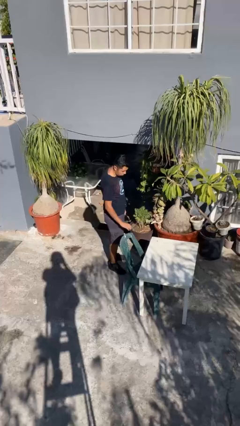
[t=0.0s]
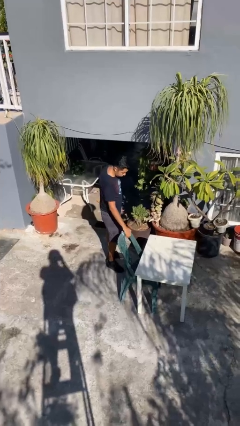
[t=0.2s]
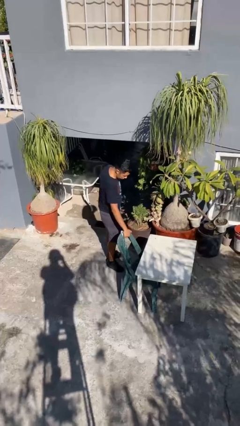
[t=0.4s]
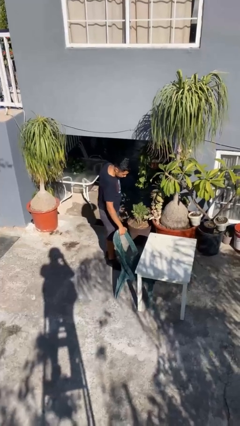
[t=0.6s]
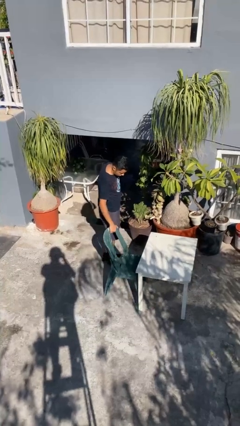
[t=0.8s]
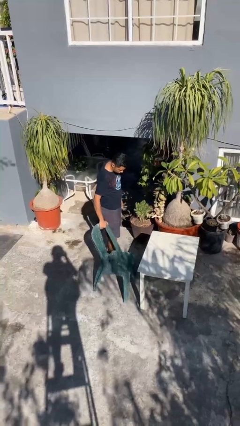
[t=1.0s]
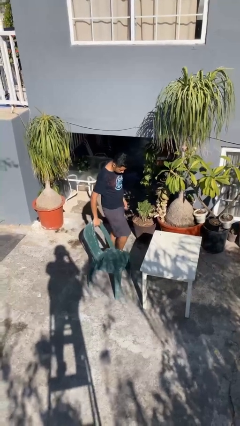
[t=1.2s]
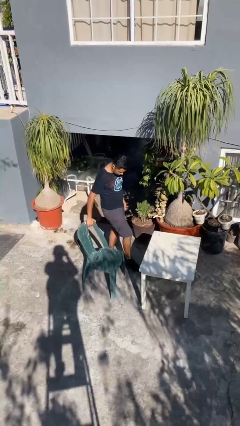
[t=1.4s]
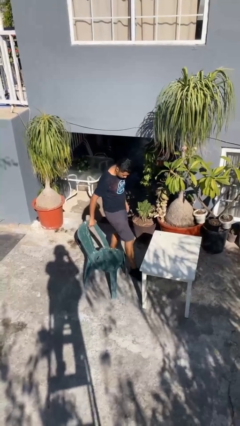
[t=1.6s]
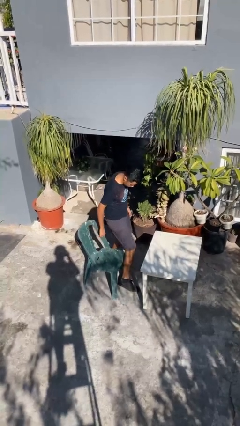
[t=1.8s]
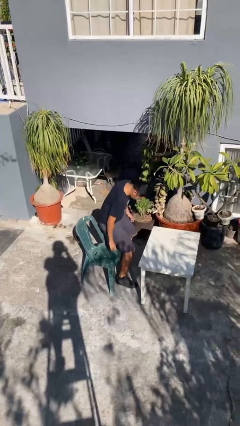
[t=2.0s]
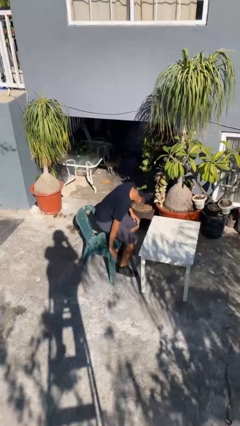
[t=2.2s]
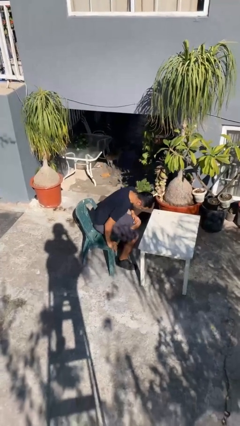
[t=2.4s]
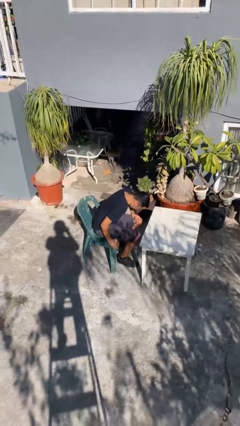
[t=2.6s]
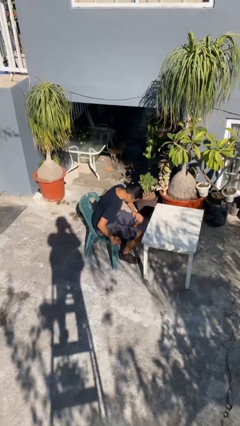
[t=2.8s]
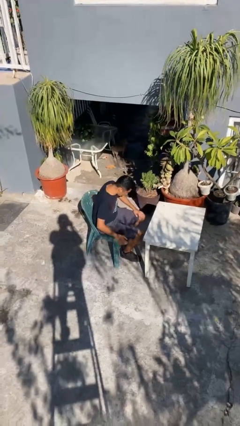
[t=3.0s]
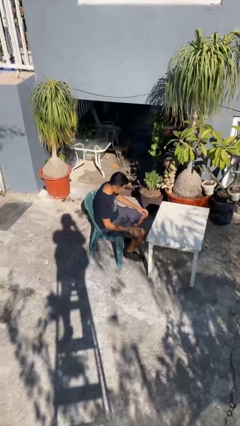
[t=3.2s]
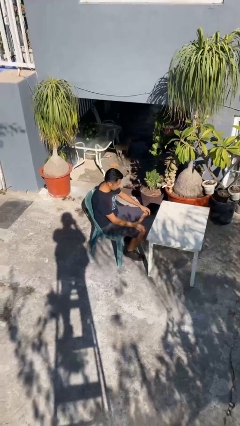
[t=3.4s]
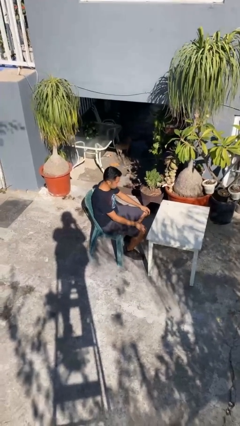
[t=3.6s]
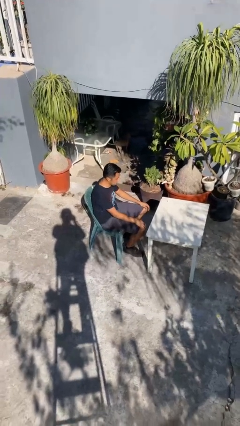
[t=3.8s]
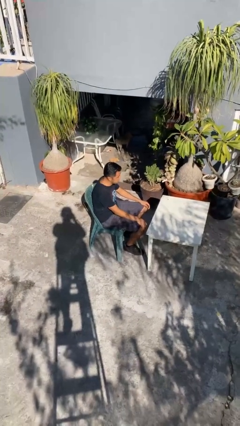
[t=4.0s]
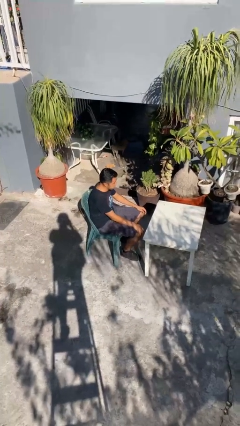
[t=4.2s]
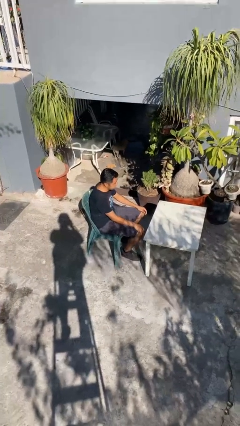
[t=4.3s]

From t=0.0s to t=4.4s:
person sits down

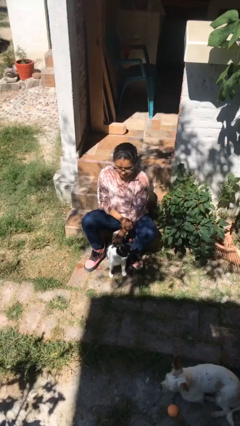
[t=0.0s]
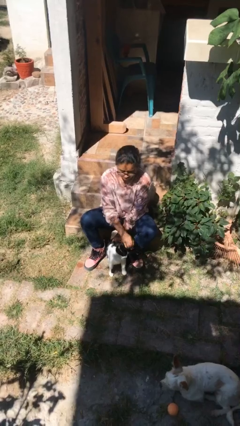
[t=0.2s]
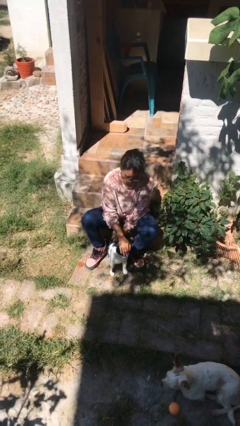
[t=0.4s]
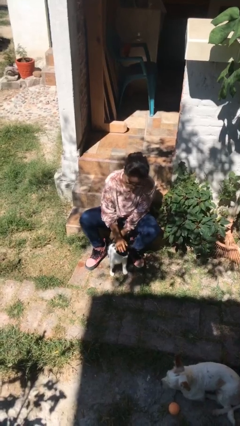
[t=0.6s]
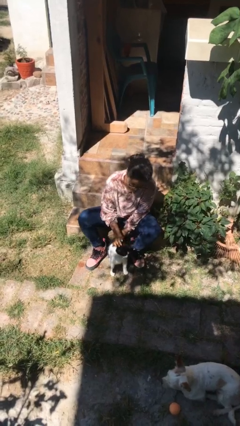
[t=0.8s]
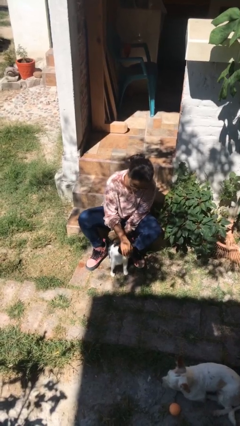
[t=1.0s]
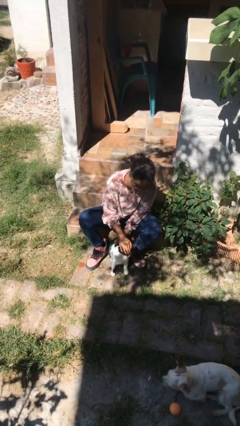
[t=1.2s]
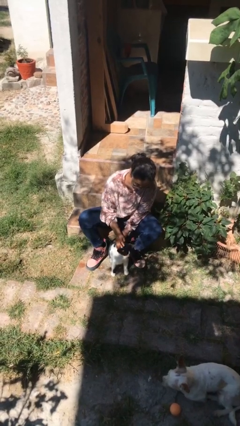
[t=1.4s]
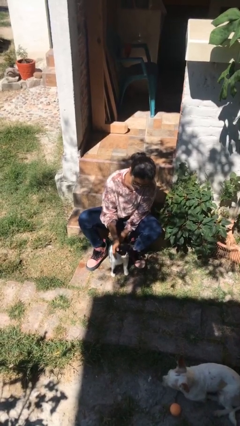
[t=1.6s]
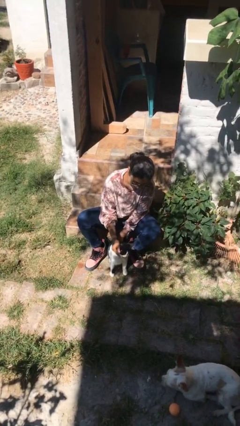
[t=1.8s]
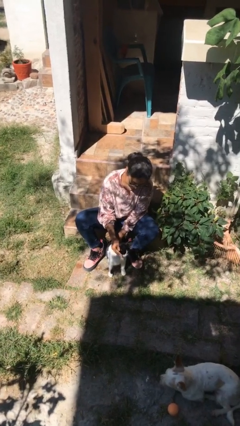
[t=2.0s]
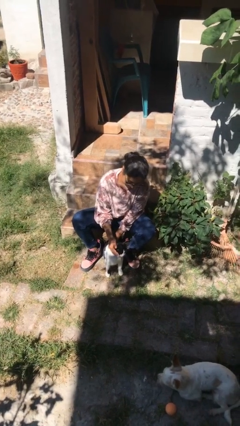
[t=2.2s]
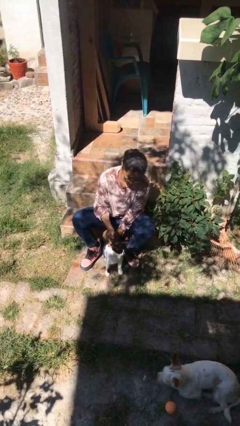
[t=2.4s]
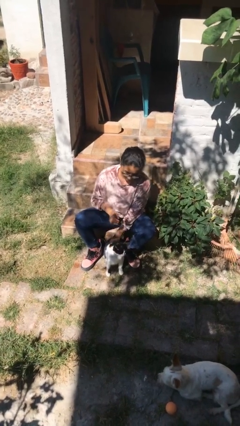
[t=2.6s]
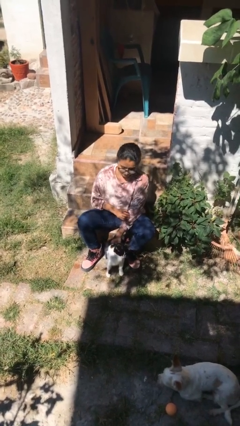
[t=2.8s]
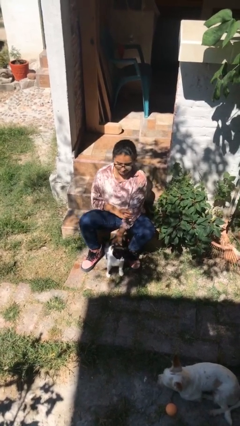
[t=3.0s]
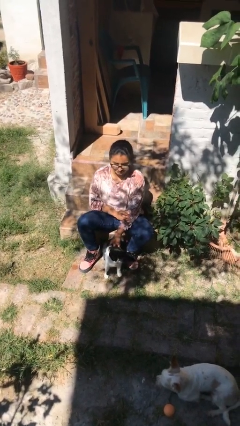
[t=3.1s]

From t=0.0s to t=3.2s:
person pets cat

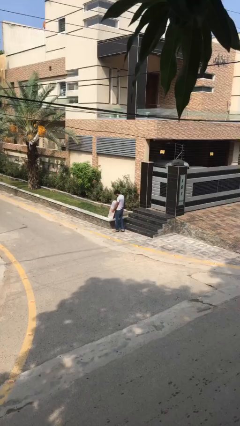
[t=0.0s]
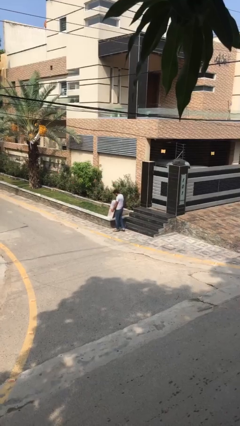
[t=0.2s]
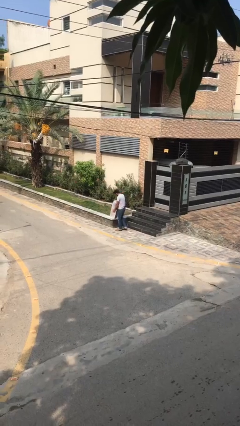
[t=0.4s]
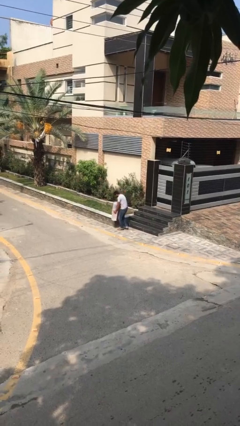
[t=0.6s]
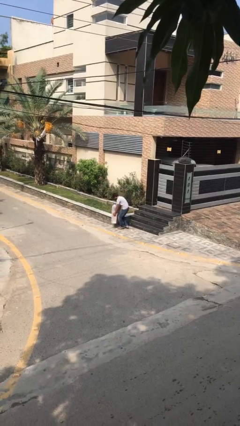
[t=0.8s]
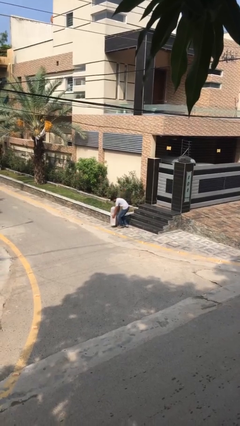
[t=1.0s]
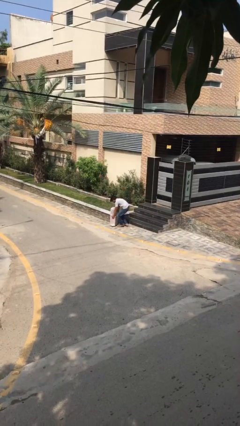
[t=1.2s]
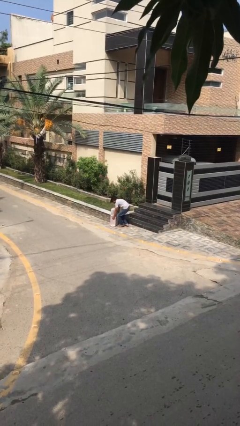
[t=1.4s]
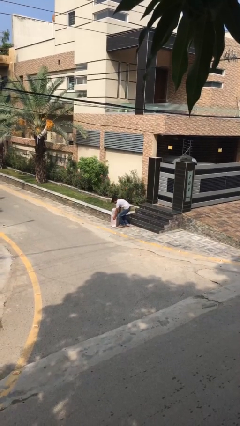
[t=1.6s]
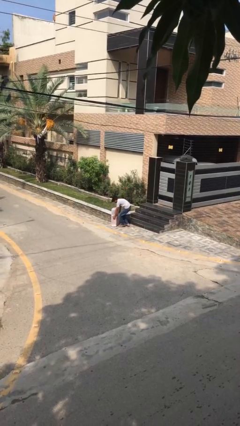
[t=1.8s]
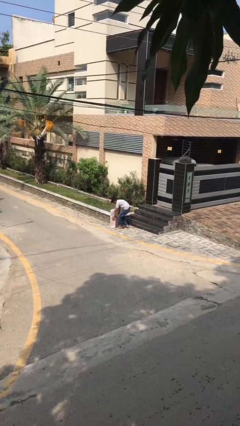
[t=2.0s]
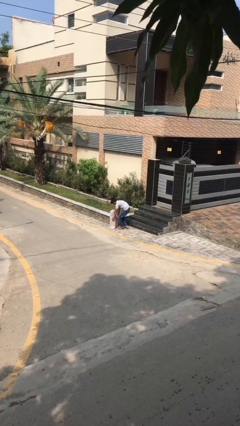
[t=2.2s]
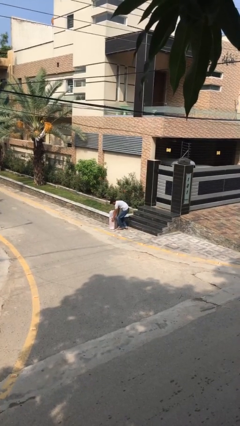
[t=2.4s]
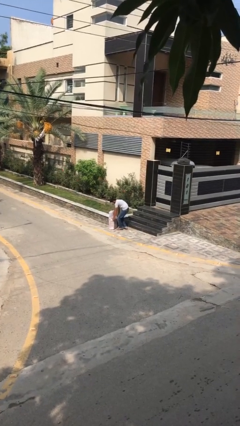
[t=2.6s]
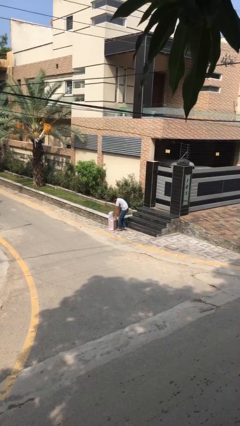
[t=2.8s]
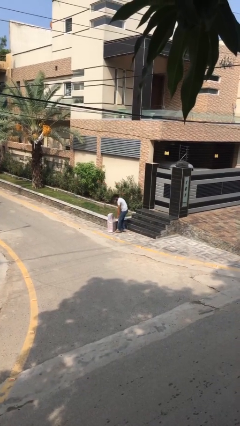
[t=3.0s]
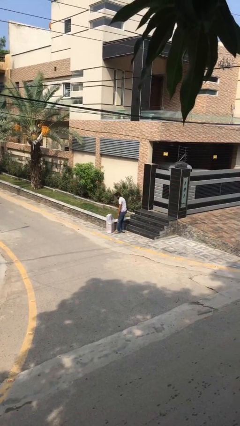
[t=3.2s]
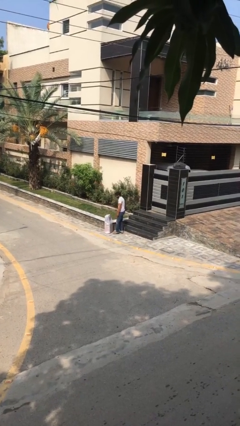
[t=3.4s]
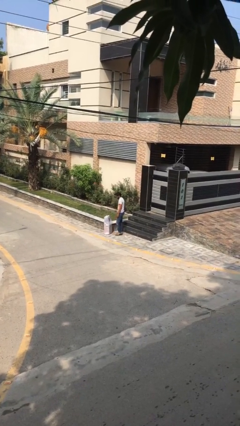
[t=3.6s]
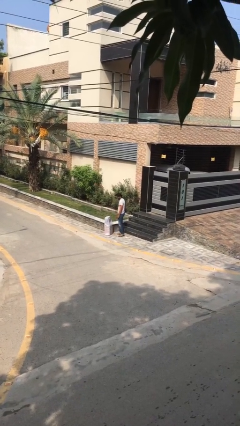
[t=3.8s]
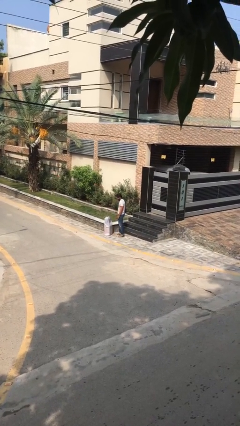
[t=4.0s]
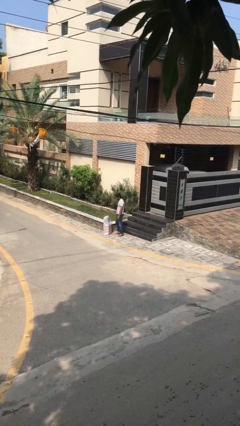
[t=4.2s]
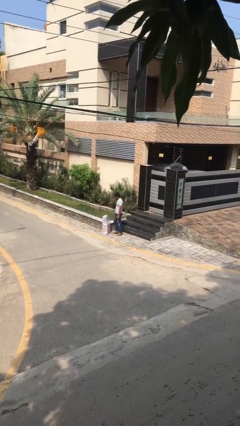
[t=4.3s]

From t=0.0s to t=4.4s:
person puts down object on floor

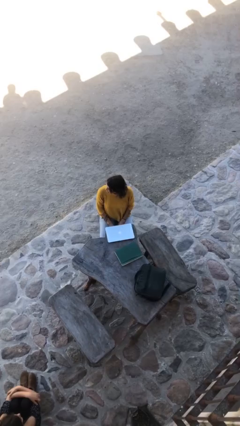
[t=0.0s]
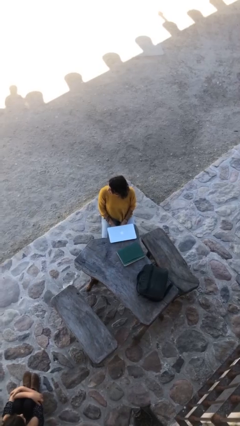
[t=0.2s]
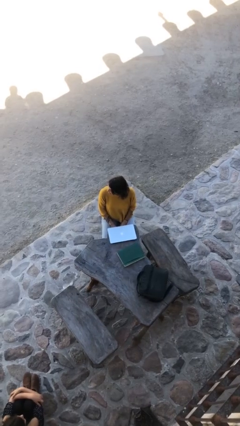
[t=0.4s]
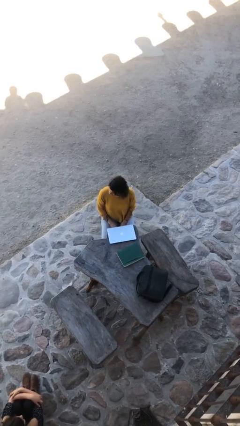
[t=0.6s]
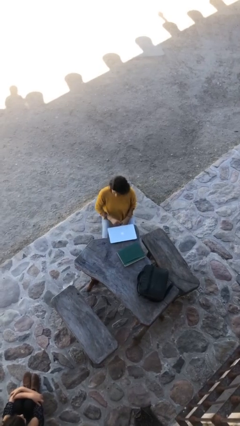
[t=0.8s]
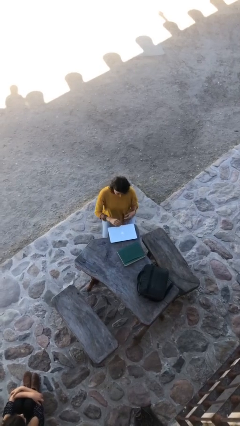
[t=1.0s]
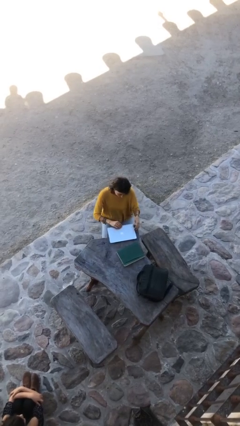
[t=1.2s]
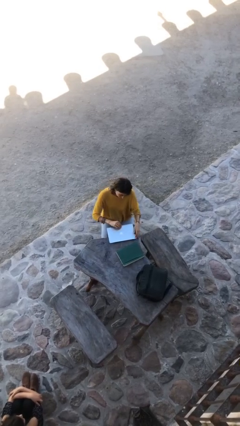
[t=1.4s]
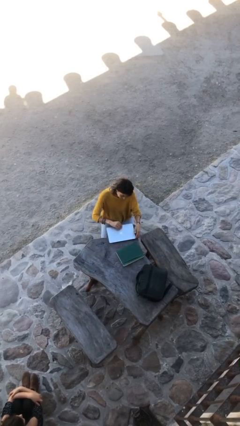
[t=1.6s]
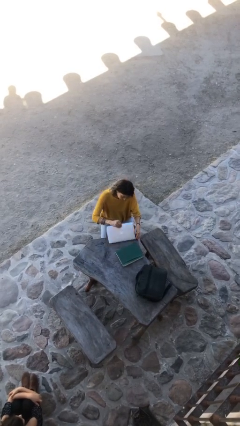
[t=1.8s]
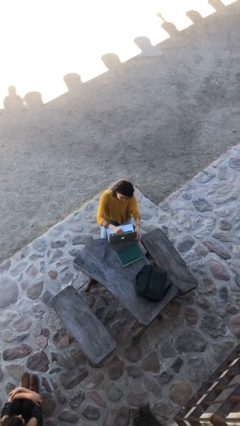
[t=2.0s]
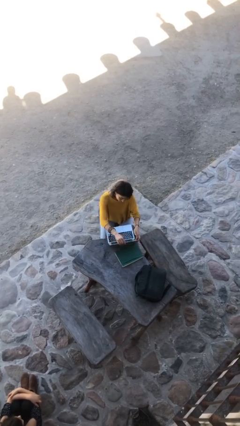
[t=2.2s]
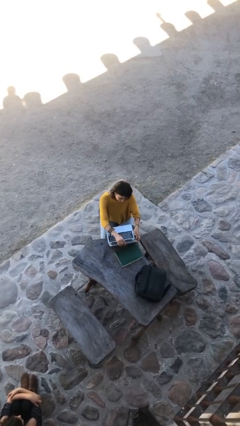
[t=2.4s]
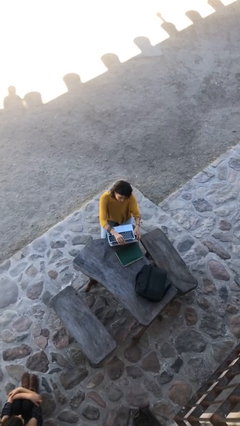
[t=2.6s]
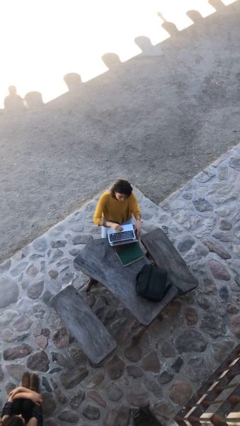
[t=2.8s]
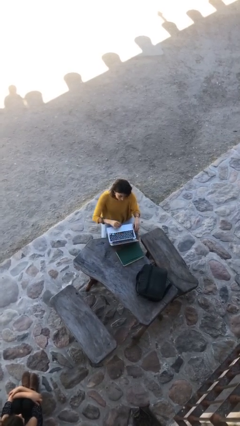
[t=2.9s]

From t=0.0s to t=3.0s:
person interacts with laptop

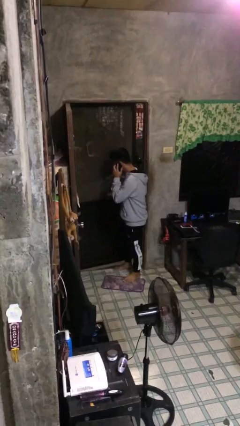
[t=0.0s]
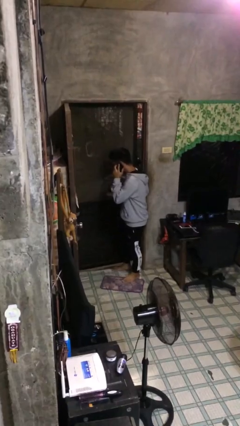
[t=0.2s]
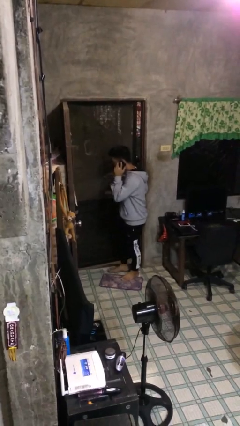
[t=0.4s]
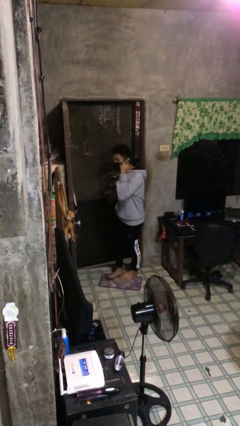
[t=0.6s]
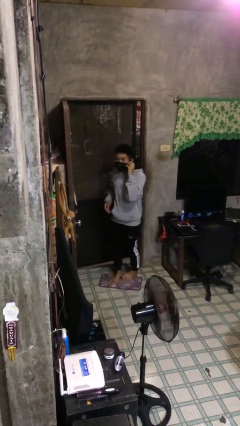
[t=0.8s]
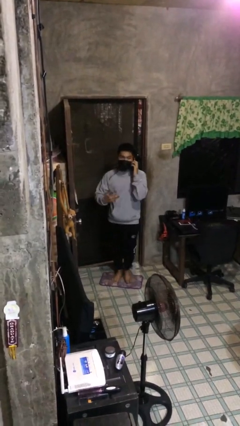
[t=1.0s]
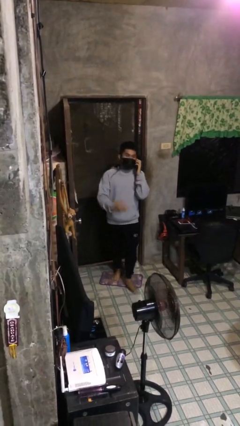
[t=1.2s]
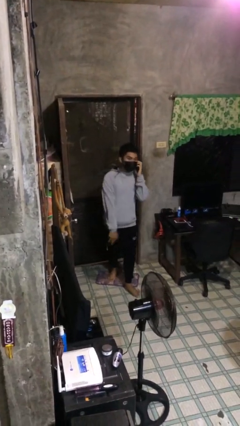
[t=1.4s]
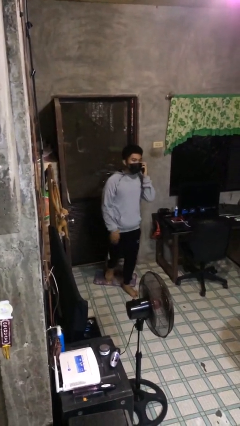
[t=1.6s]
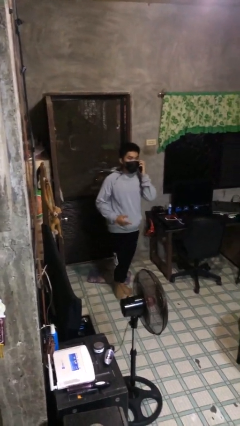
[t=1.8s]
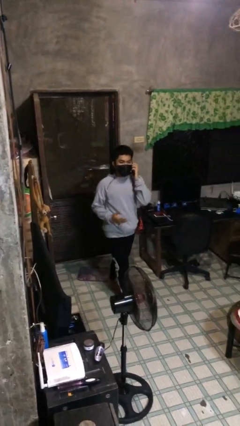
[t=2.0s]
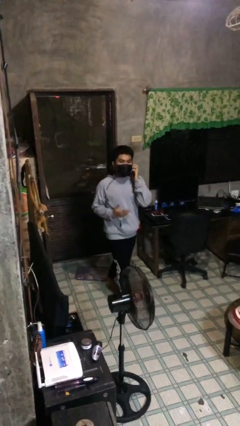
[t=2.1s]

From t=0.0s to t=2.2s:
person closes facility door
